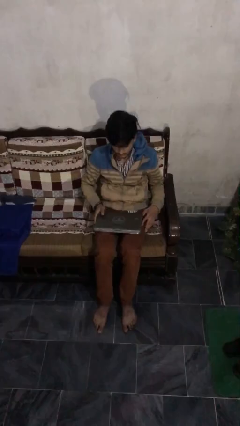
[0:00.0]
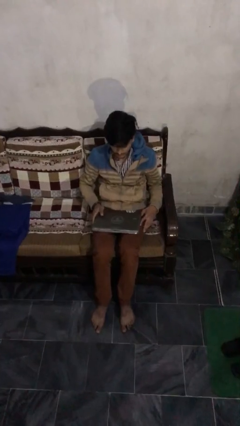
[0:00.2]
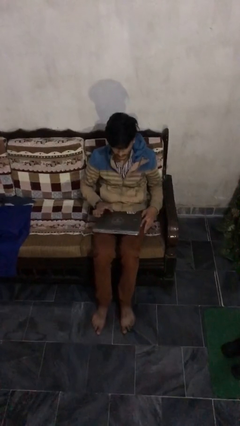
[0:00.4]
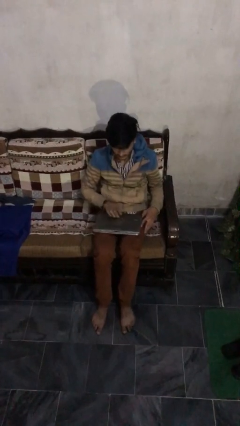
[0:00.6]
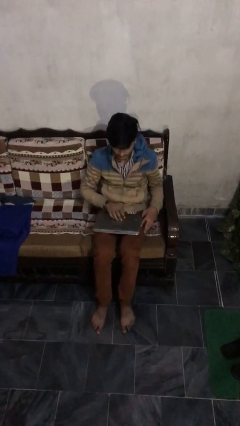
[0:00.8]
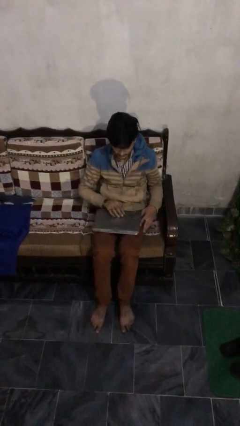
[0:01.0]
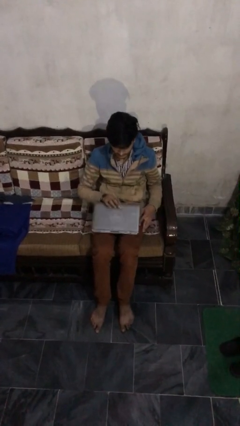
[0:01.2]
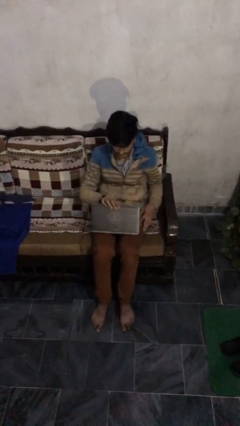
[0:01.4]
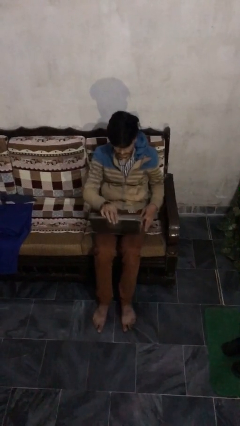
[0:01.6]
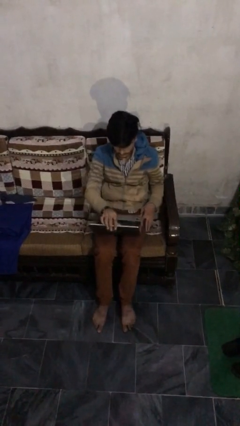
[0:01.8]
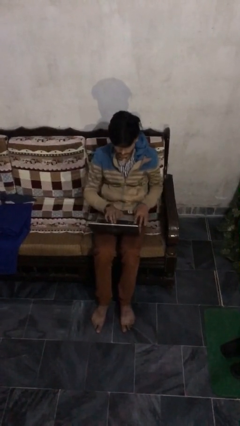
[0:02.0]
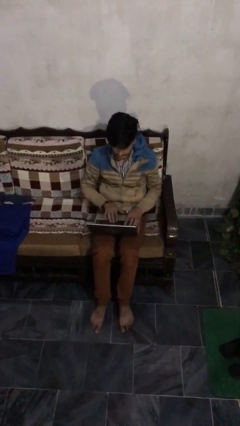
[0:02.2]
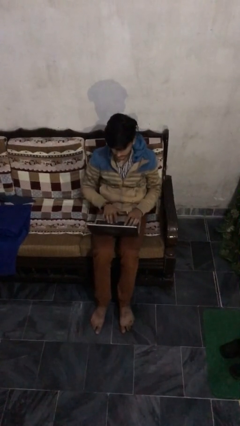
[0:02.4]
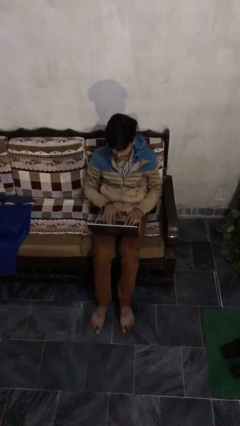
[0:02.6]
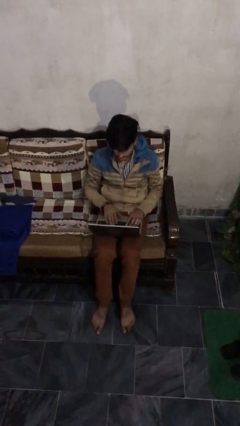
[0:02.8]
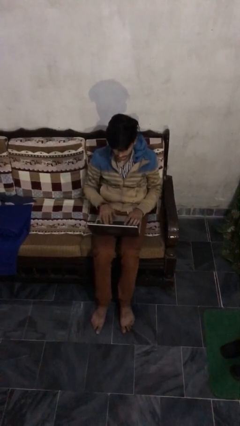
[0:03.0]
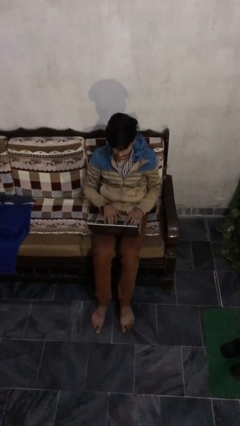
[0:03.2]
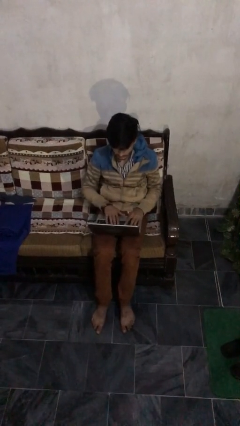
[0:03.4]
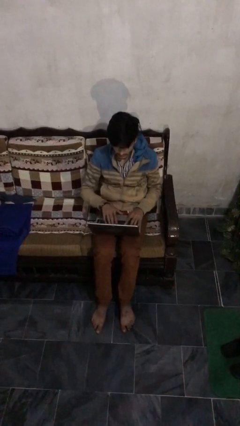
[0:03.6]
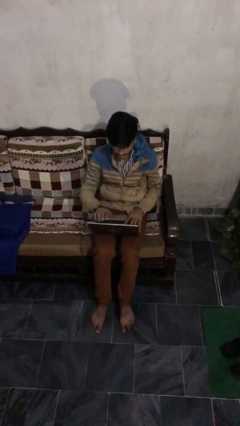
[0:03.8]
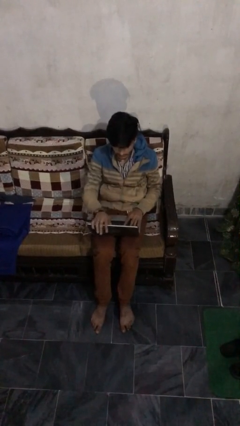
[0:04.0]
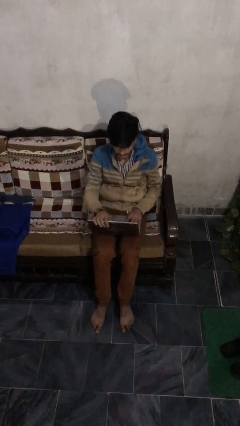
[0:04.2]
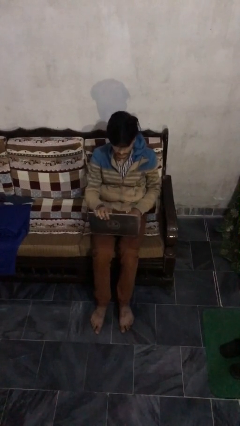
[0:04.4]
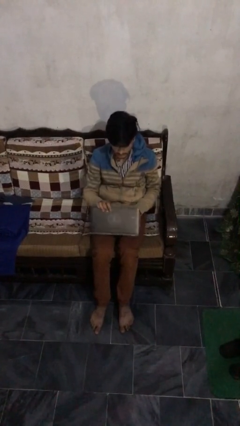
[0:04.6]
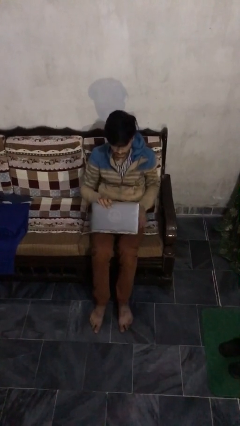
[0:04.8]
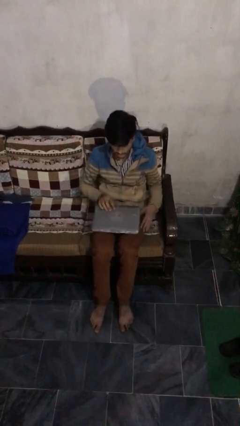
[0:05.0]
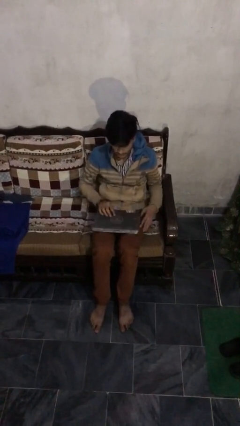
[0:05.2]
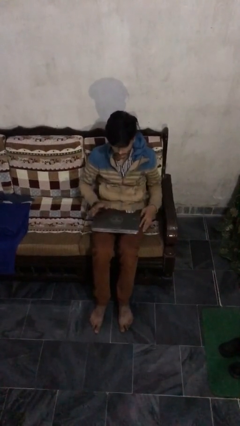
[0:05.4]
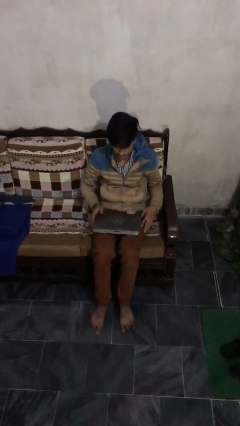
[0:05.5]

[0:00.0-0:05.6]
person interacts with laptop

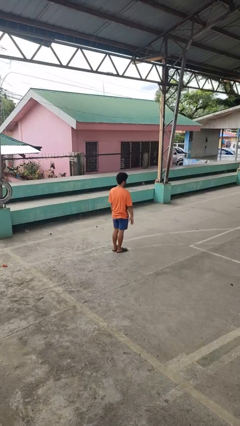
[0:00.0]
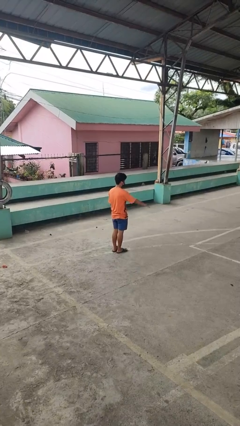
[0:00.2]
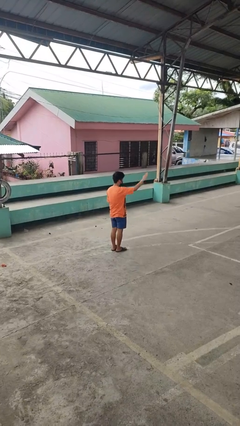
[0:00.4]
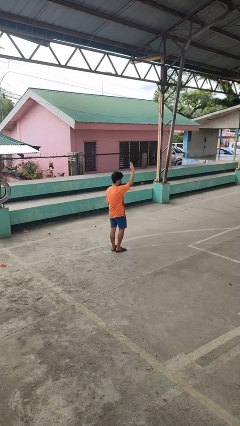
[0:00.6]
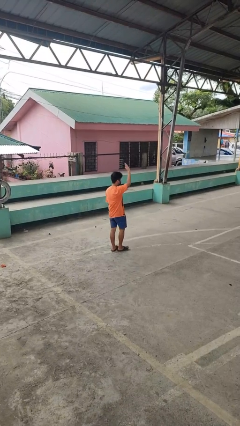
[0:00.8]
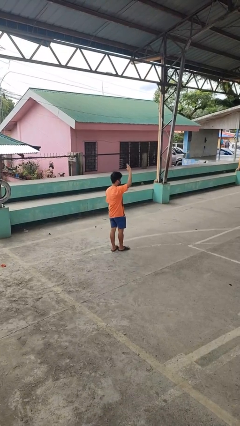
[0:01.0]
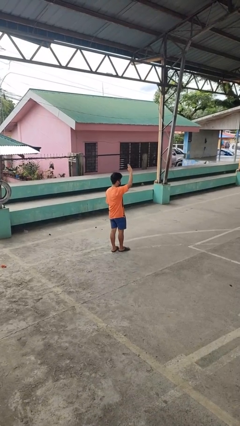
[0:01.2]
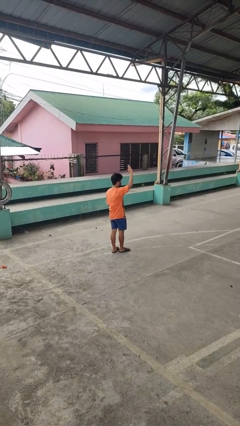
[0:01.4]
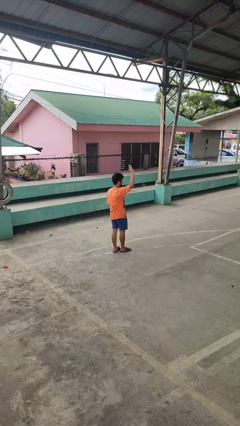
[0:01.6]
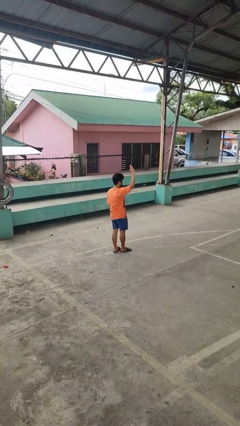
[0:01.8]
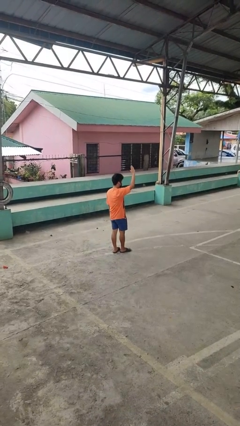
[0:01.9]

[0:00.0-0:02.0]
person gestures raise hand

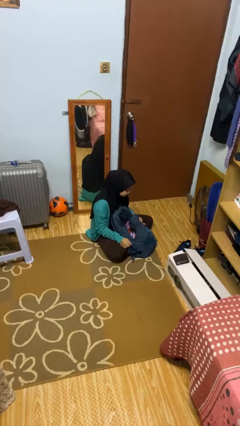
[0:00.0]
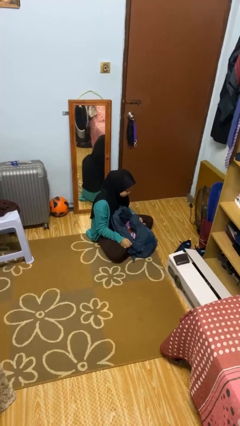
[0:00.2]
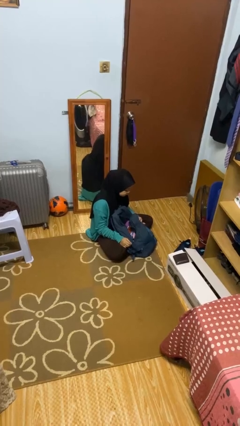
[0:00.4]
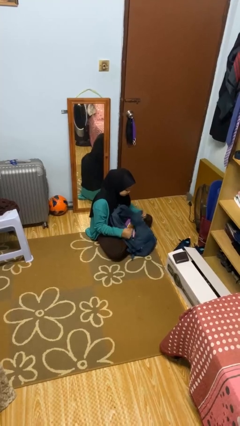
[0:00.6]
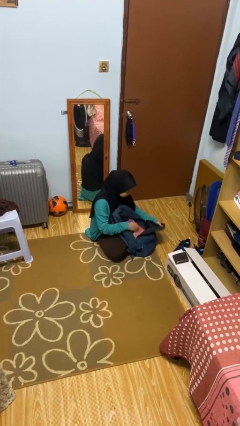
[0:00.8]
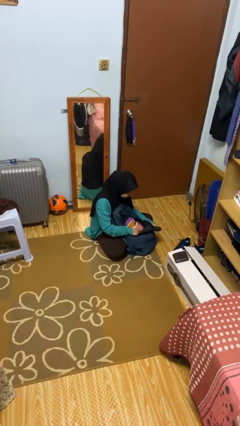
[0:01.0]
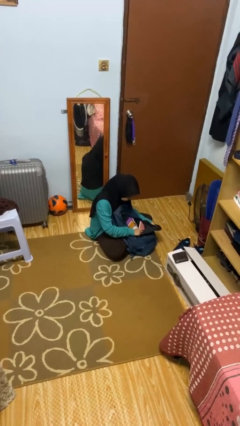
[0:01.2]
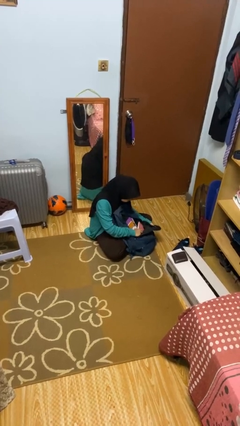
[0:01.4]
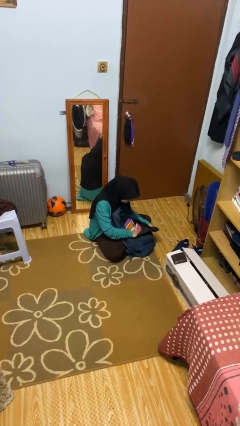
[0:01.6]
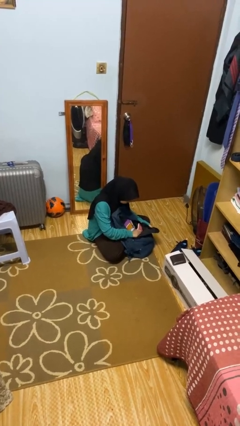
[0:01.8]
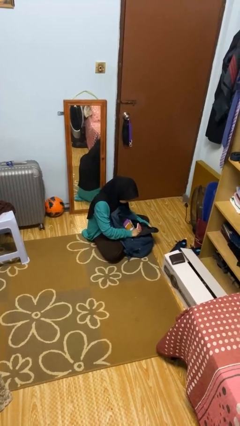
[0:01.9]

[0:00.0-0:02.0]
person searches in backpack

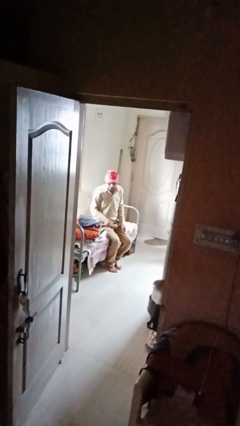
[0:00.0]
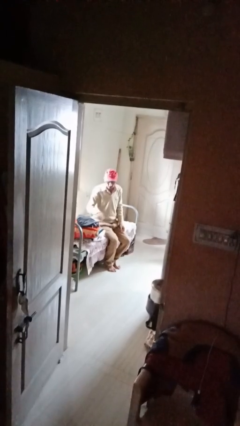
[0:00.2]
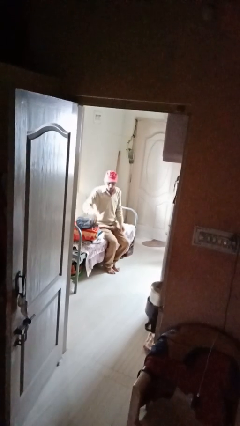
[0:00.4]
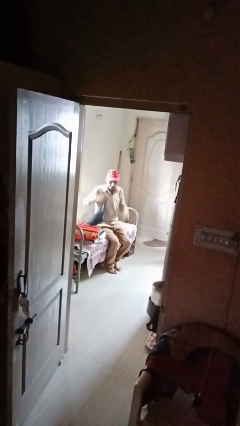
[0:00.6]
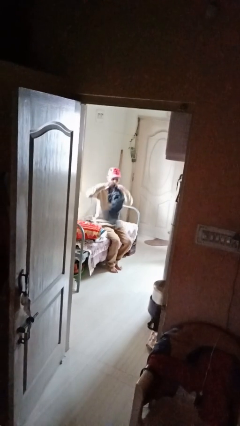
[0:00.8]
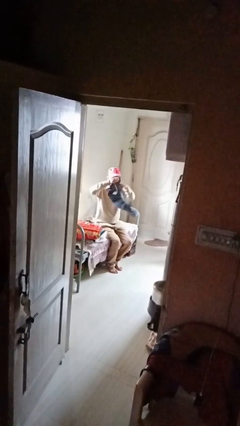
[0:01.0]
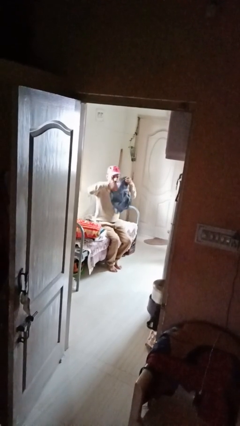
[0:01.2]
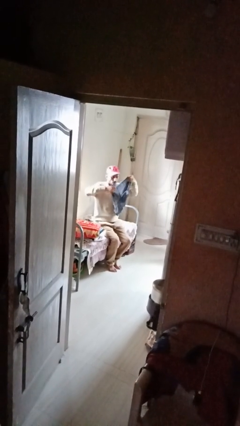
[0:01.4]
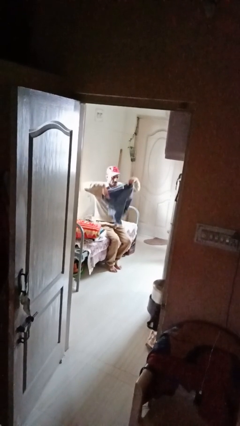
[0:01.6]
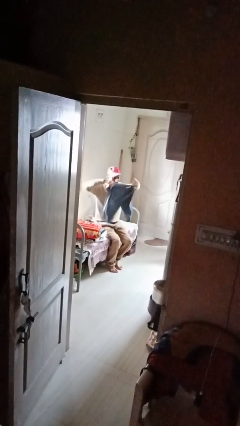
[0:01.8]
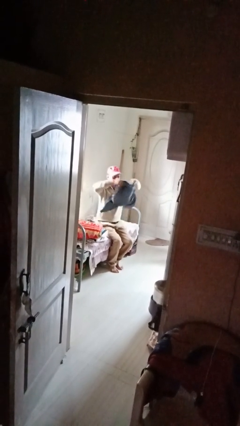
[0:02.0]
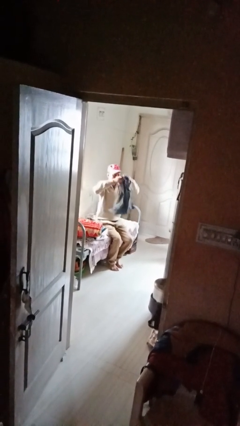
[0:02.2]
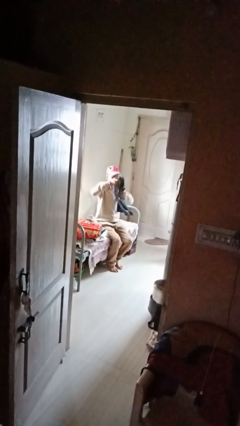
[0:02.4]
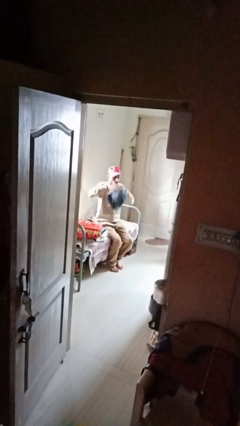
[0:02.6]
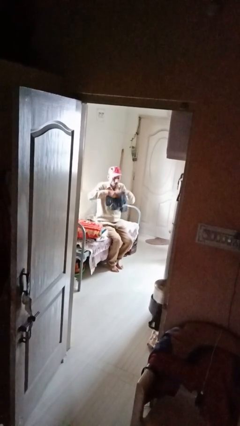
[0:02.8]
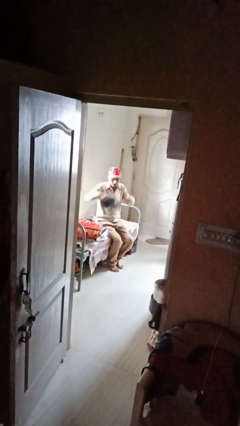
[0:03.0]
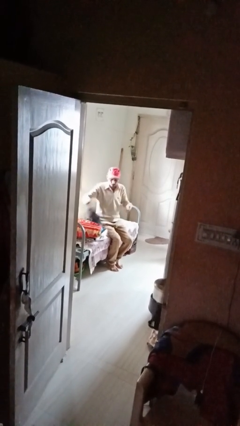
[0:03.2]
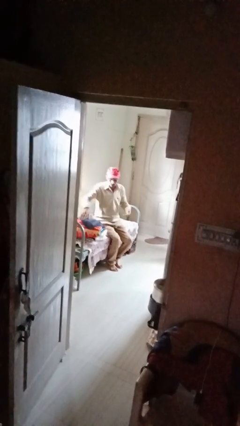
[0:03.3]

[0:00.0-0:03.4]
person folds pants

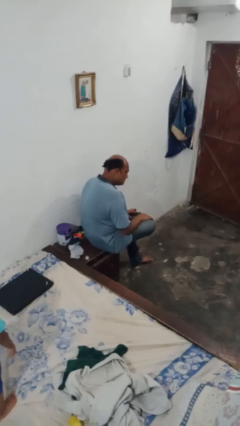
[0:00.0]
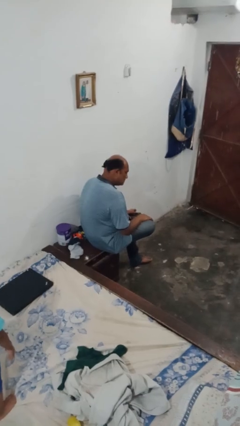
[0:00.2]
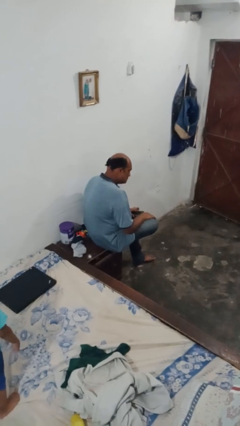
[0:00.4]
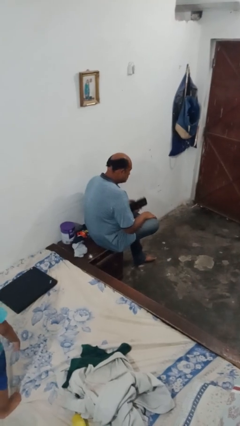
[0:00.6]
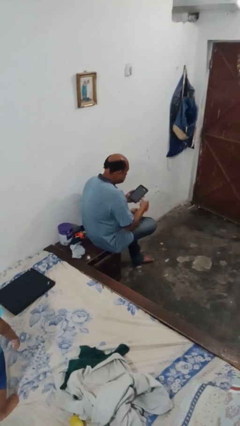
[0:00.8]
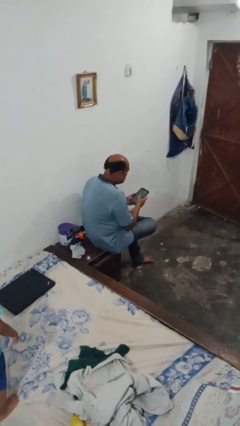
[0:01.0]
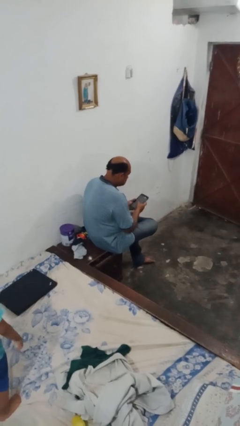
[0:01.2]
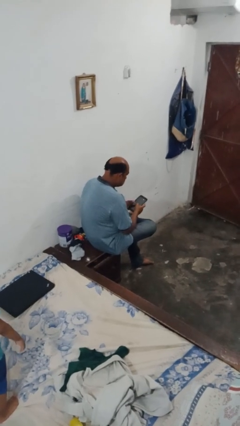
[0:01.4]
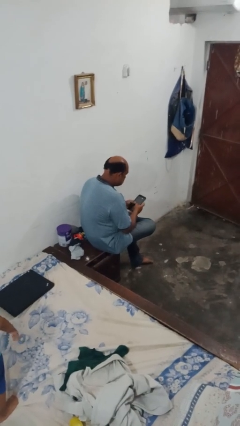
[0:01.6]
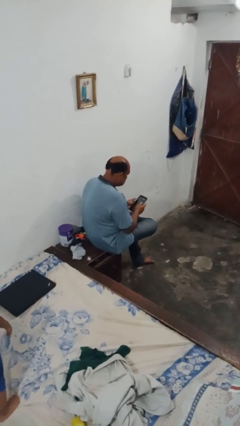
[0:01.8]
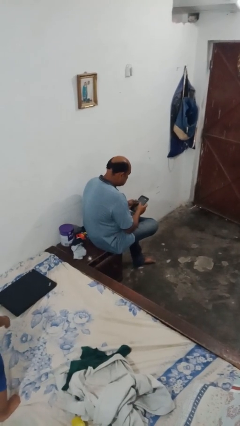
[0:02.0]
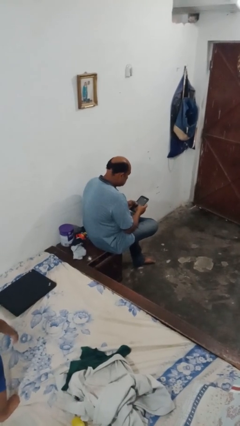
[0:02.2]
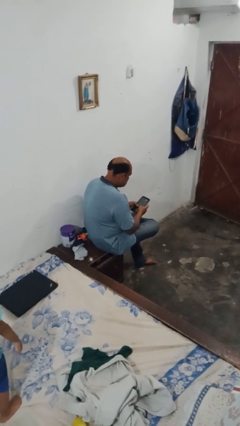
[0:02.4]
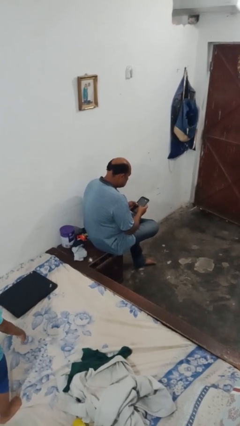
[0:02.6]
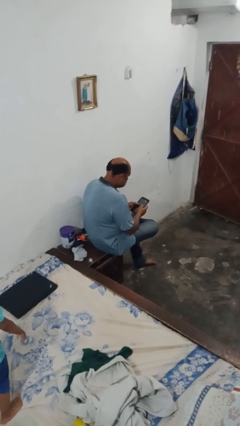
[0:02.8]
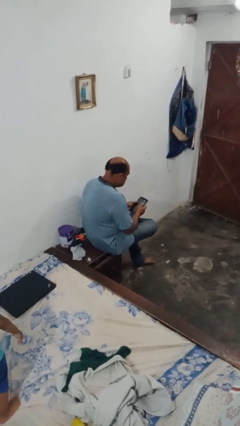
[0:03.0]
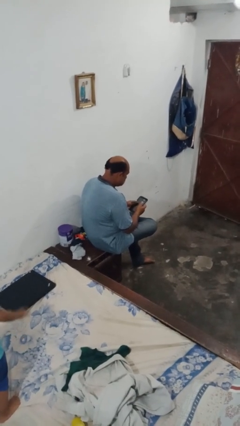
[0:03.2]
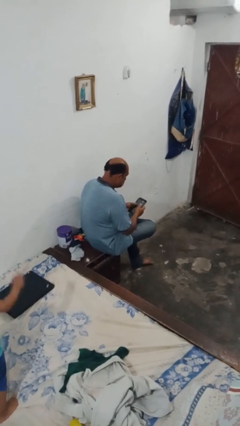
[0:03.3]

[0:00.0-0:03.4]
person interacts with tablet

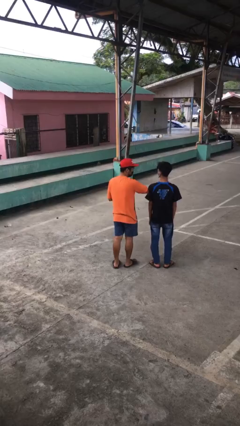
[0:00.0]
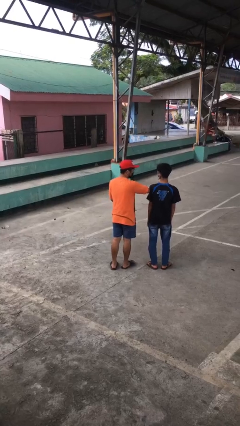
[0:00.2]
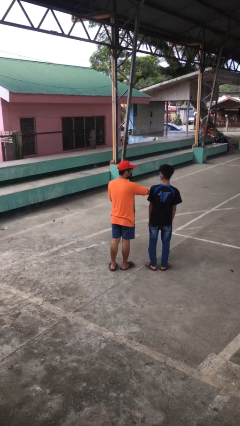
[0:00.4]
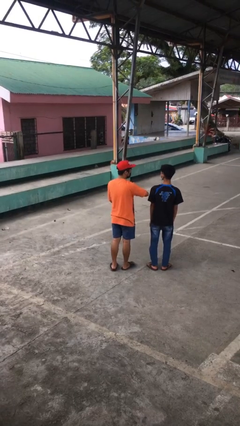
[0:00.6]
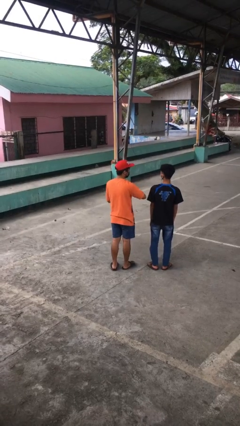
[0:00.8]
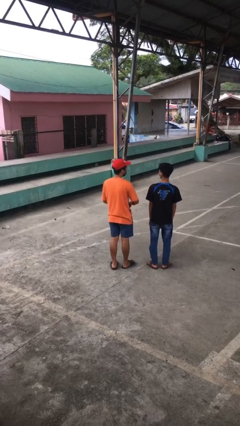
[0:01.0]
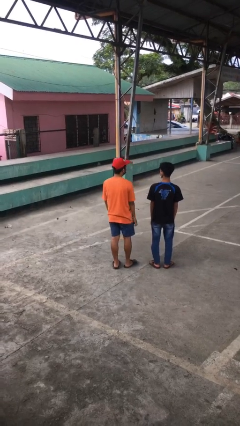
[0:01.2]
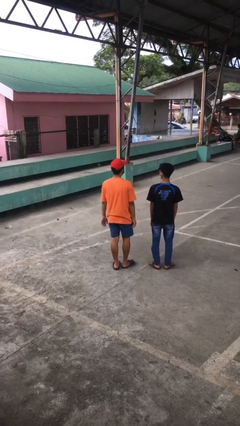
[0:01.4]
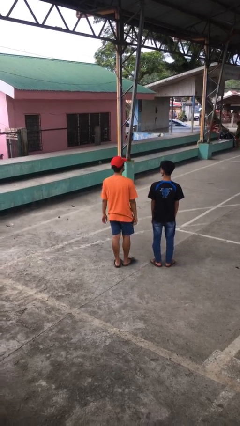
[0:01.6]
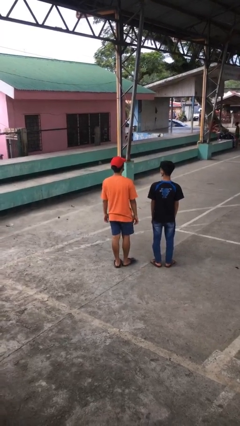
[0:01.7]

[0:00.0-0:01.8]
person nudges person with elbow
